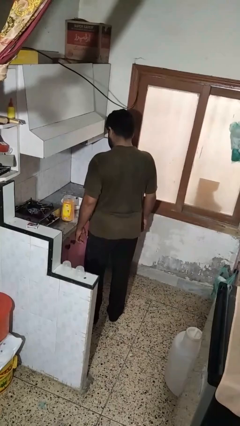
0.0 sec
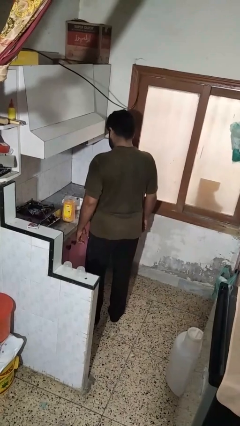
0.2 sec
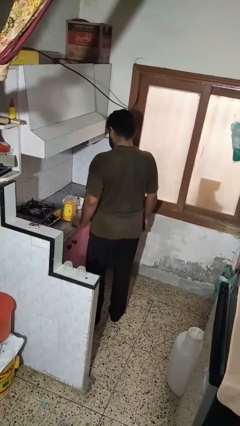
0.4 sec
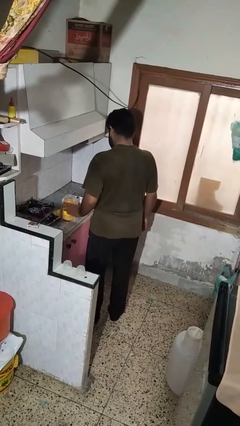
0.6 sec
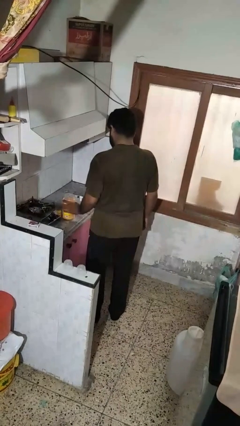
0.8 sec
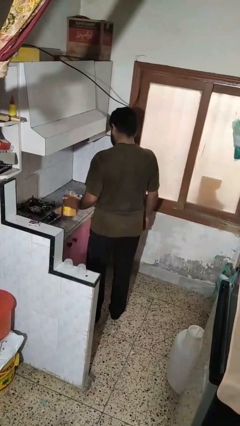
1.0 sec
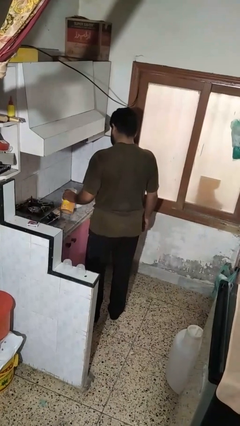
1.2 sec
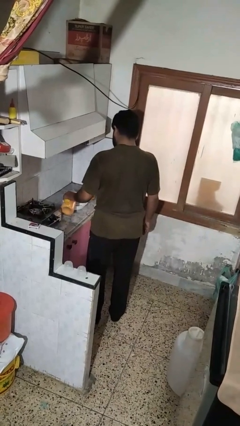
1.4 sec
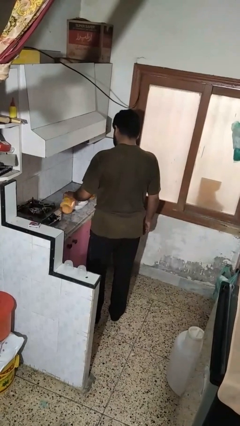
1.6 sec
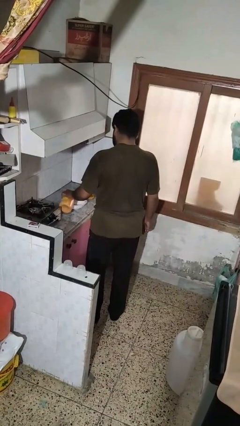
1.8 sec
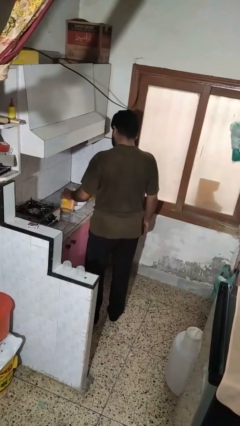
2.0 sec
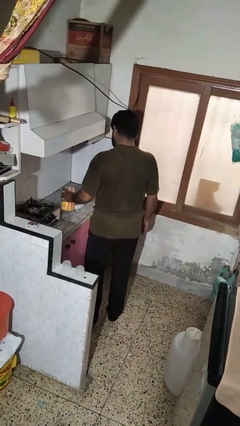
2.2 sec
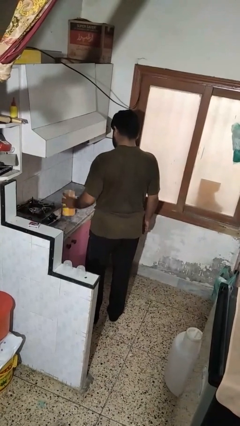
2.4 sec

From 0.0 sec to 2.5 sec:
person pours into bowl

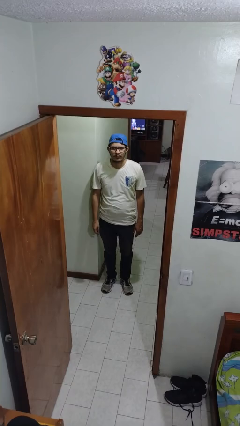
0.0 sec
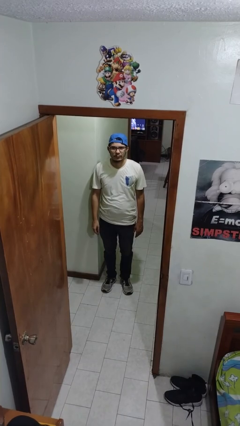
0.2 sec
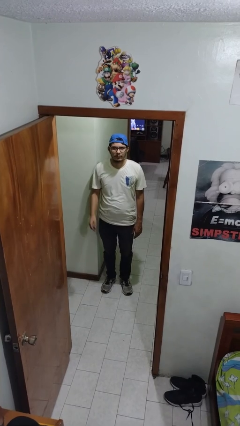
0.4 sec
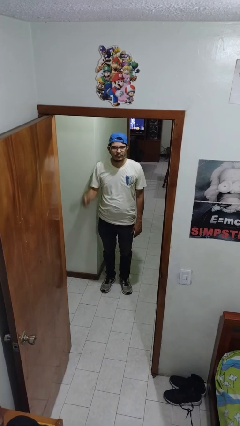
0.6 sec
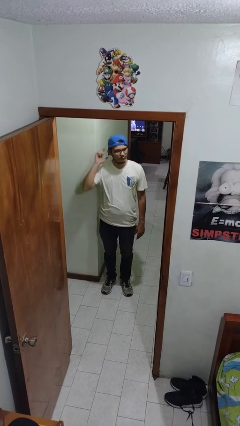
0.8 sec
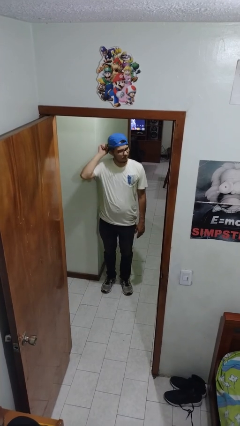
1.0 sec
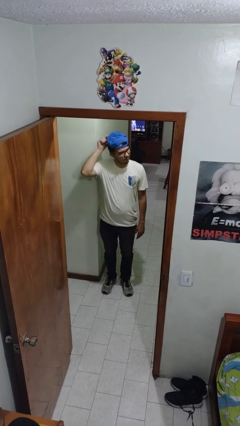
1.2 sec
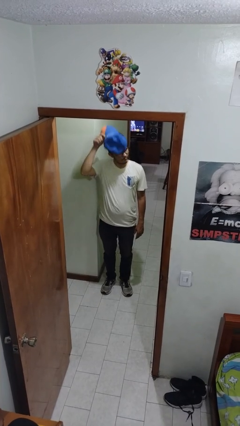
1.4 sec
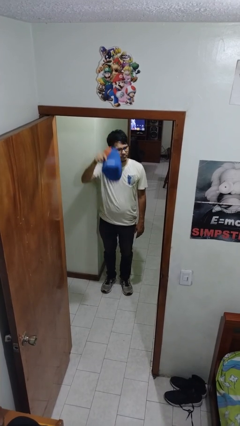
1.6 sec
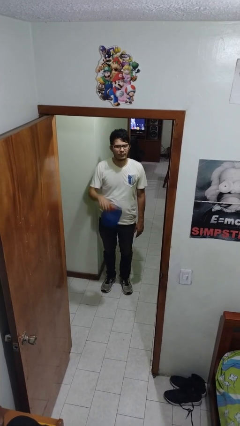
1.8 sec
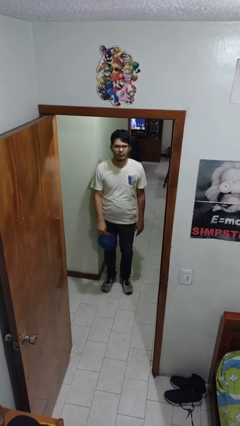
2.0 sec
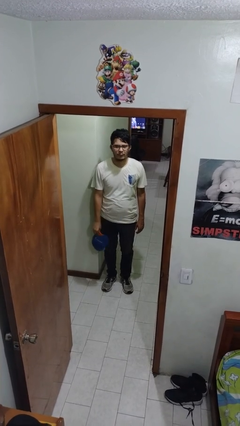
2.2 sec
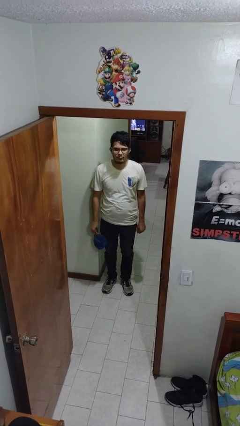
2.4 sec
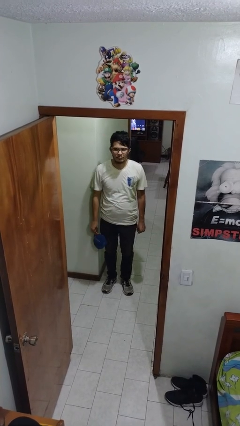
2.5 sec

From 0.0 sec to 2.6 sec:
person takes off hat

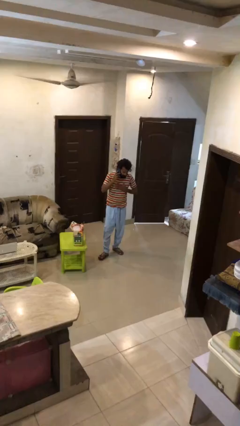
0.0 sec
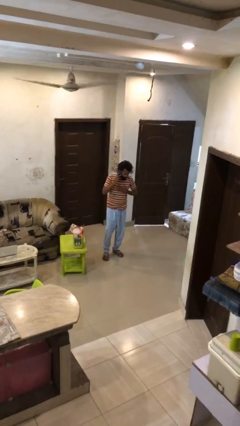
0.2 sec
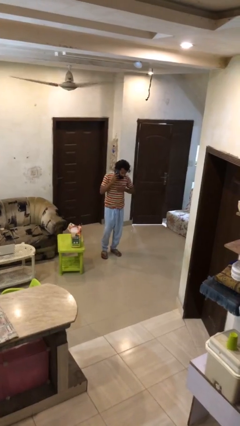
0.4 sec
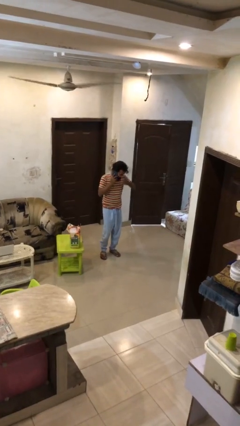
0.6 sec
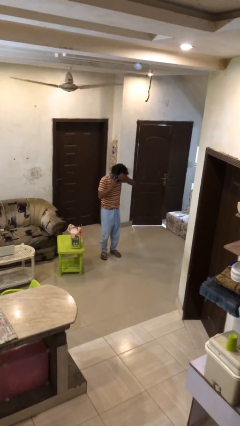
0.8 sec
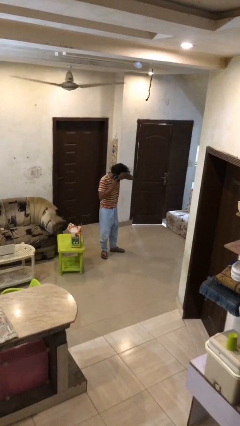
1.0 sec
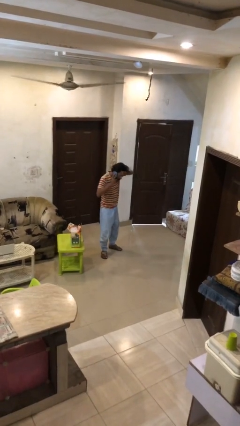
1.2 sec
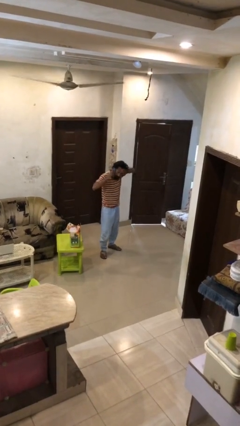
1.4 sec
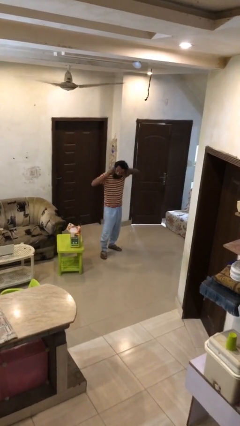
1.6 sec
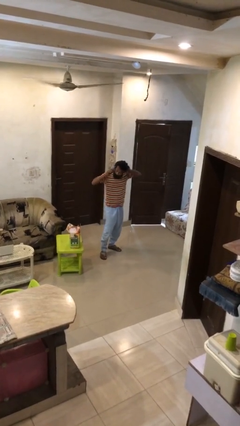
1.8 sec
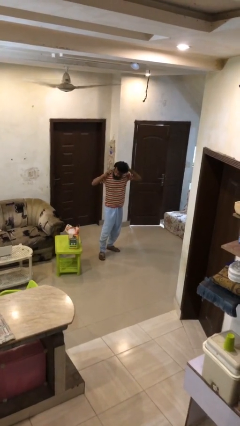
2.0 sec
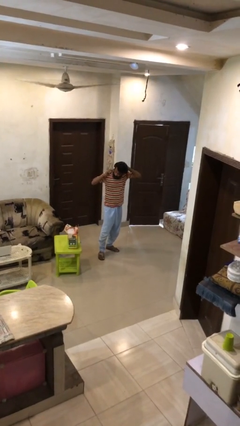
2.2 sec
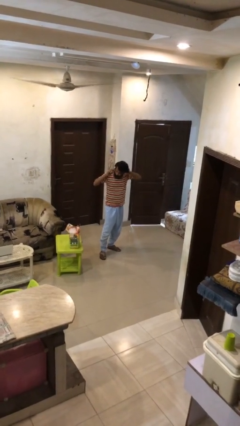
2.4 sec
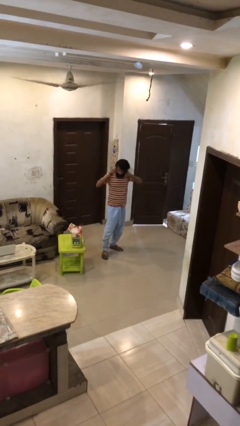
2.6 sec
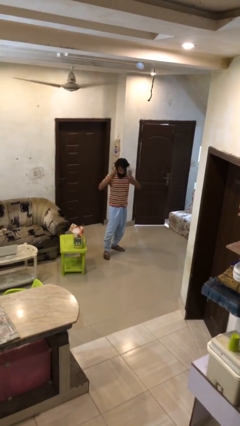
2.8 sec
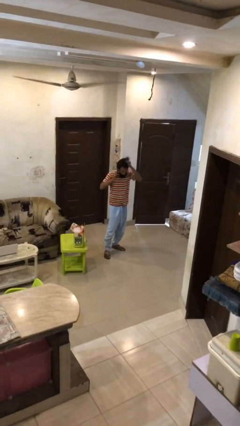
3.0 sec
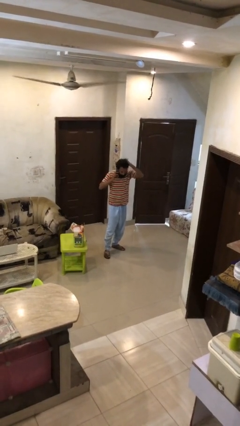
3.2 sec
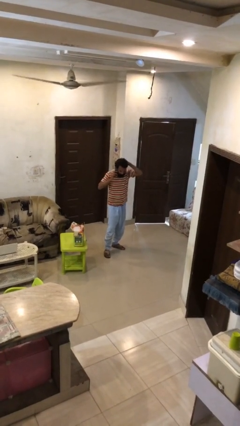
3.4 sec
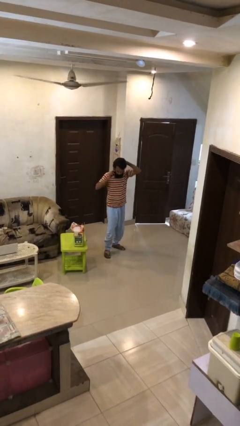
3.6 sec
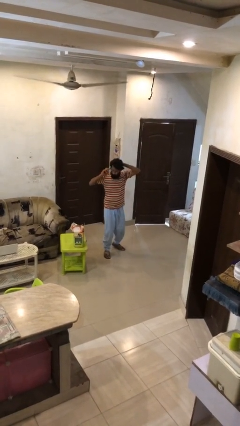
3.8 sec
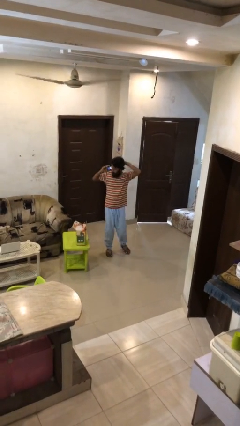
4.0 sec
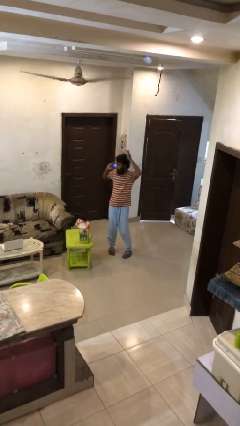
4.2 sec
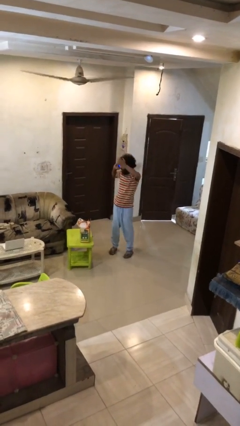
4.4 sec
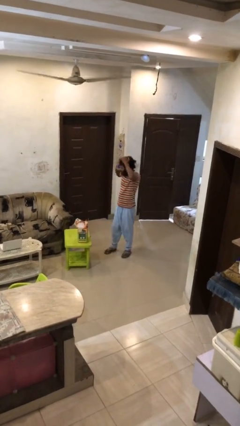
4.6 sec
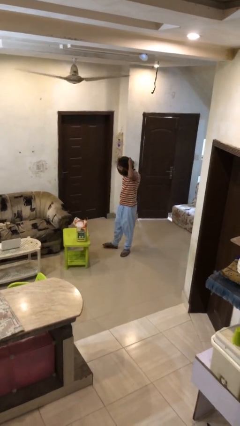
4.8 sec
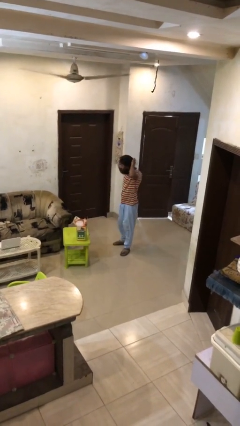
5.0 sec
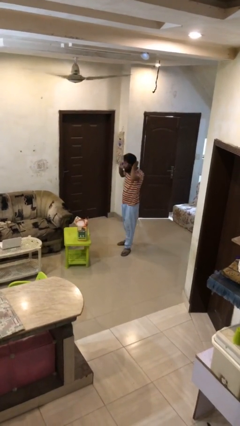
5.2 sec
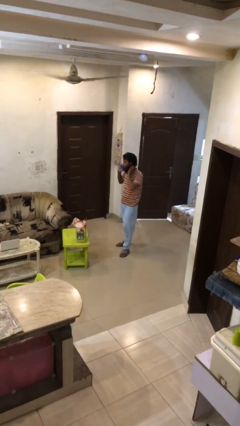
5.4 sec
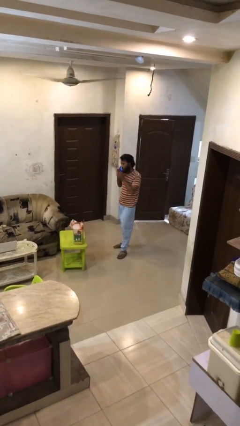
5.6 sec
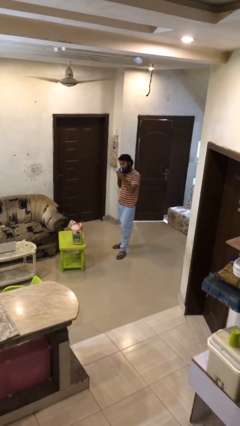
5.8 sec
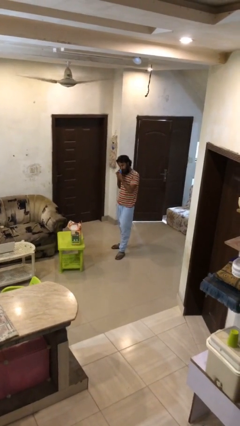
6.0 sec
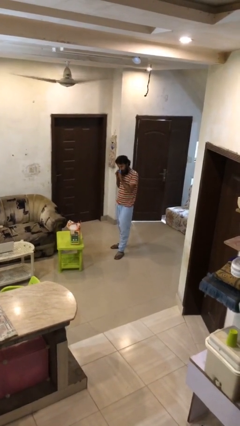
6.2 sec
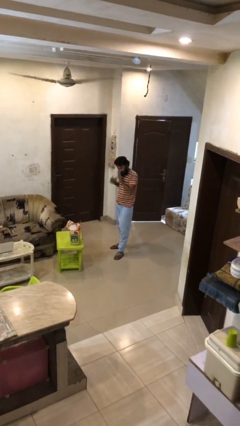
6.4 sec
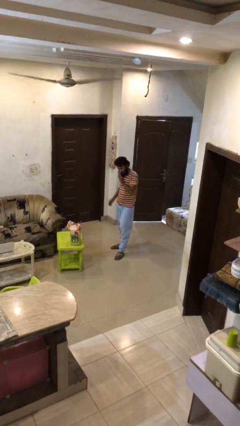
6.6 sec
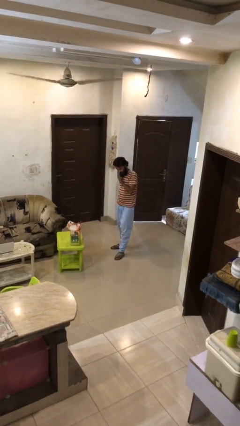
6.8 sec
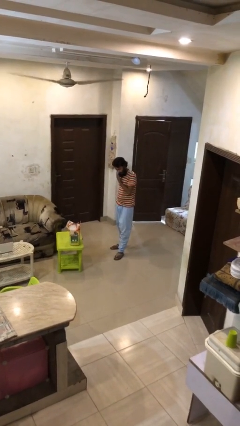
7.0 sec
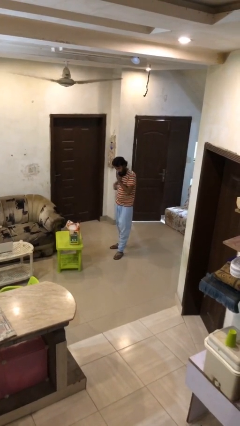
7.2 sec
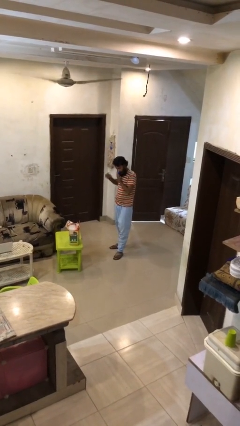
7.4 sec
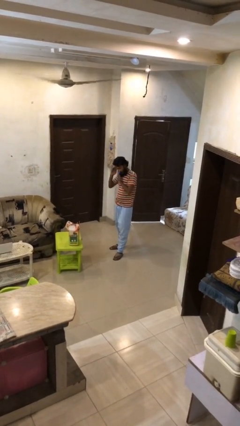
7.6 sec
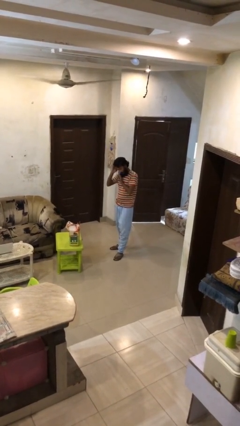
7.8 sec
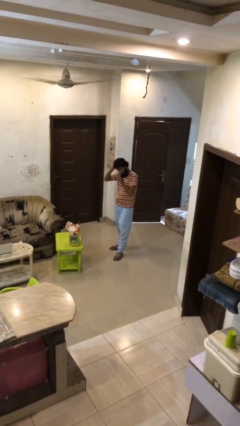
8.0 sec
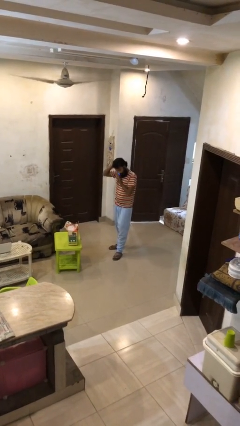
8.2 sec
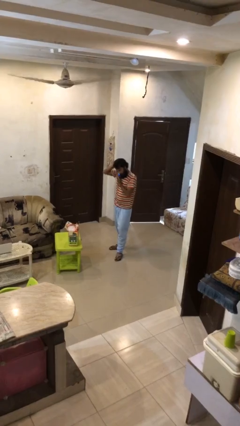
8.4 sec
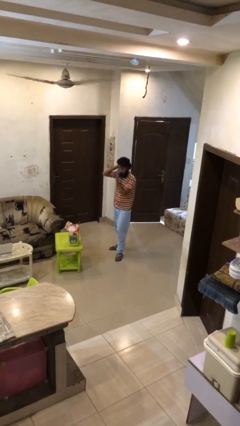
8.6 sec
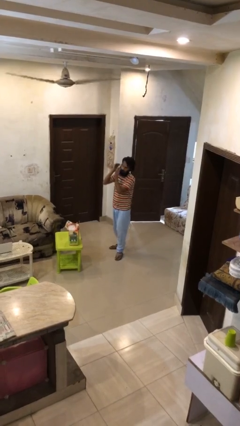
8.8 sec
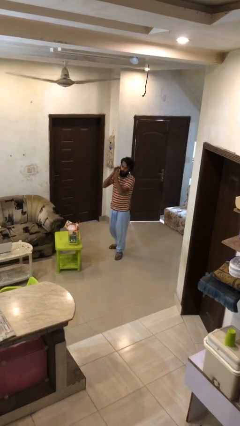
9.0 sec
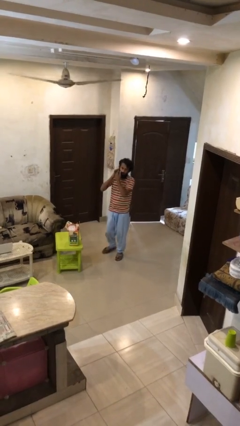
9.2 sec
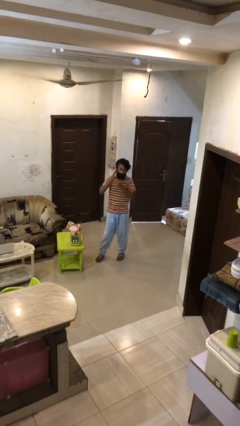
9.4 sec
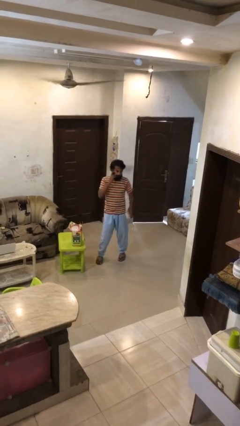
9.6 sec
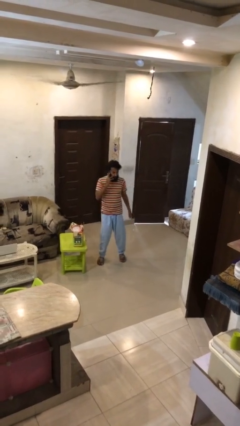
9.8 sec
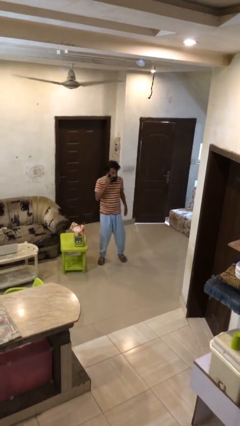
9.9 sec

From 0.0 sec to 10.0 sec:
person talks on phone

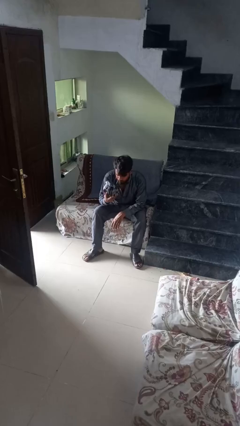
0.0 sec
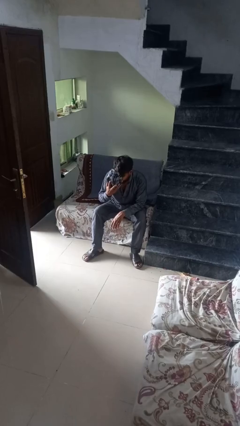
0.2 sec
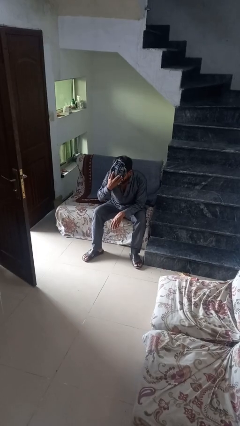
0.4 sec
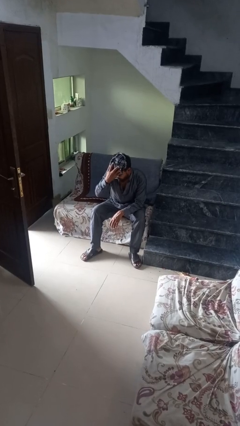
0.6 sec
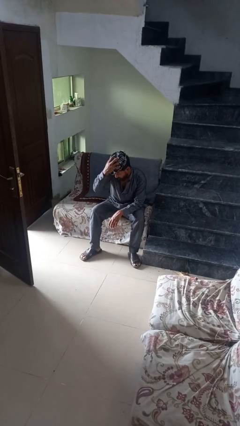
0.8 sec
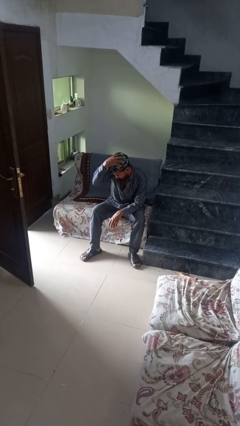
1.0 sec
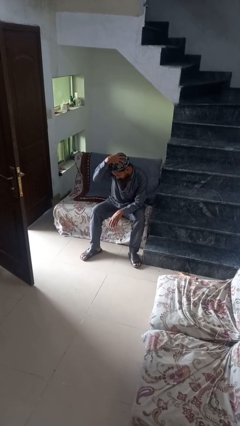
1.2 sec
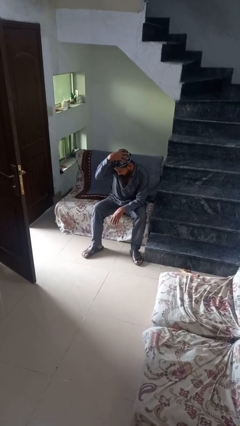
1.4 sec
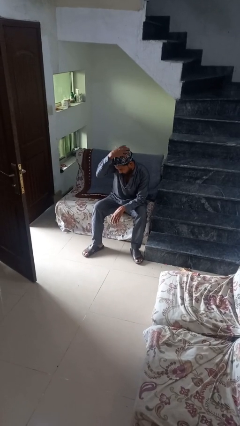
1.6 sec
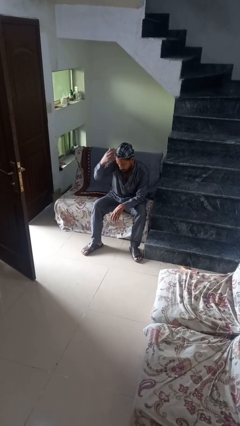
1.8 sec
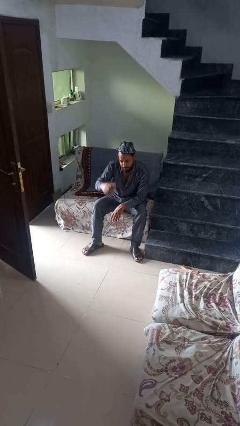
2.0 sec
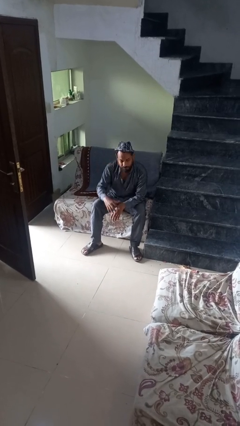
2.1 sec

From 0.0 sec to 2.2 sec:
person puts on hat

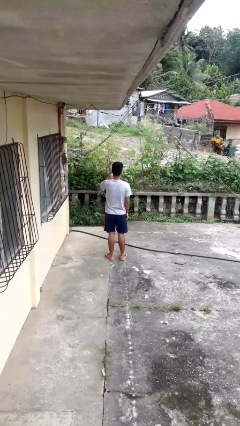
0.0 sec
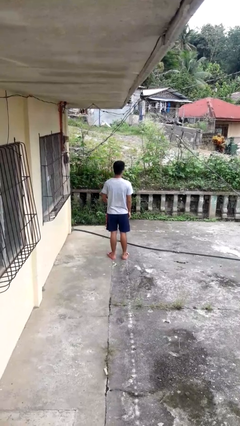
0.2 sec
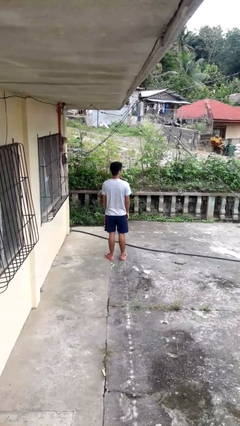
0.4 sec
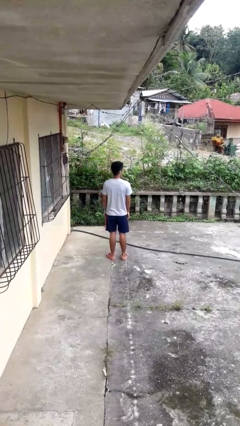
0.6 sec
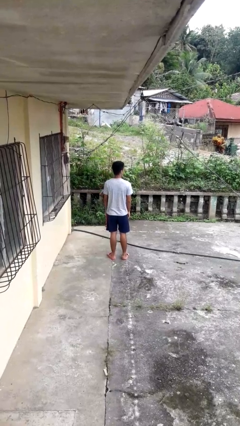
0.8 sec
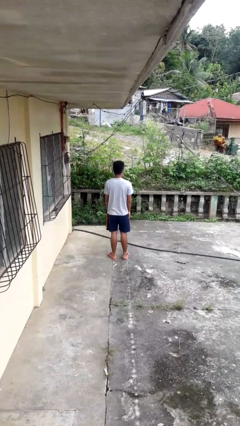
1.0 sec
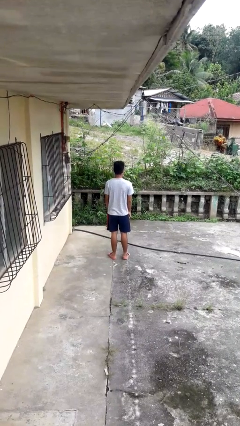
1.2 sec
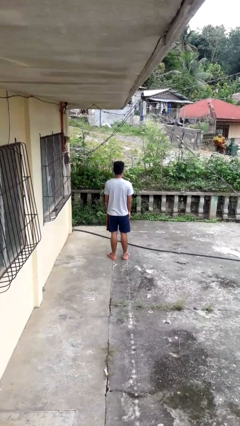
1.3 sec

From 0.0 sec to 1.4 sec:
person gestures lower hand
